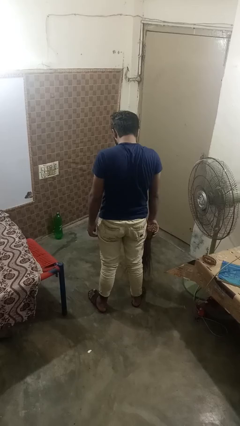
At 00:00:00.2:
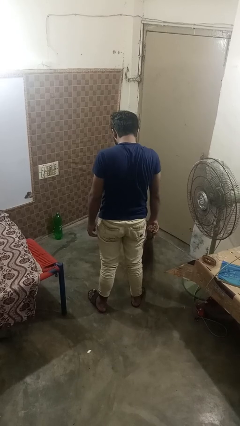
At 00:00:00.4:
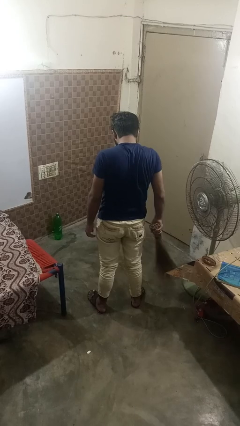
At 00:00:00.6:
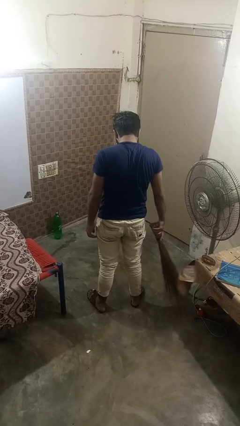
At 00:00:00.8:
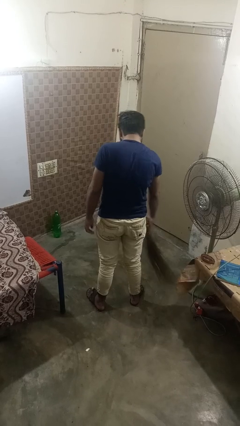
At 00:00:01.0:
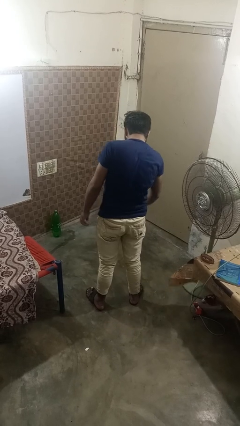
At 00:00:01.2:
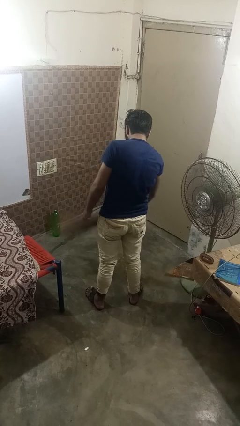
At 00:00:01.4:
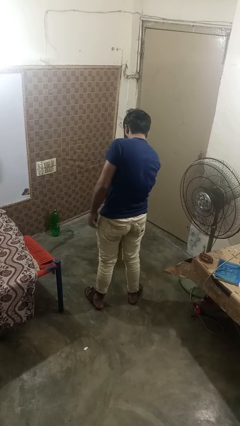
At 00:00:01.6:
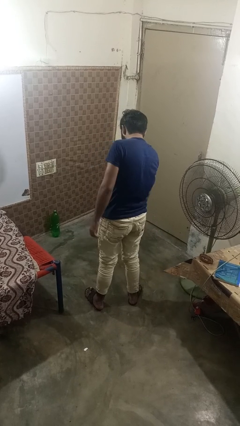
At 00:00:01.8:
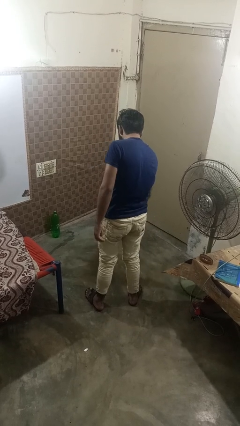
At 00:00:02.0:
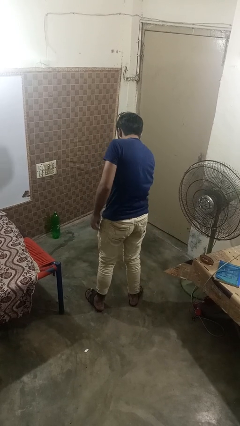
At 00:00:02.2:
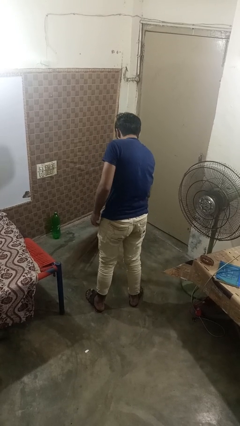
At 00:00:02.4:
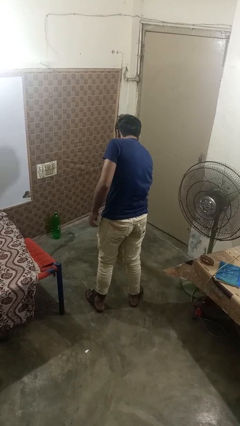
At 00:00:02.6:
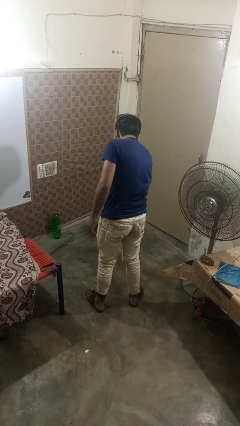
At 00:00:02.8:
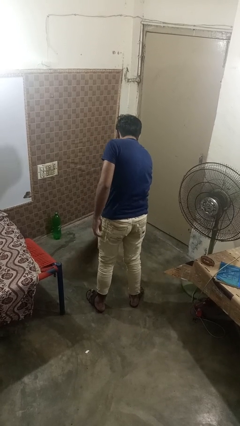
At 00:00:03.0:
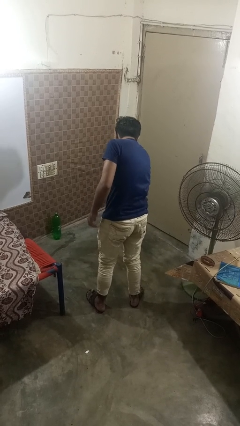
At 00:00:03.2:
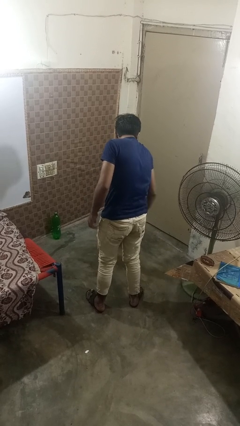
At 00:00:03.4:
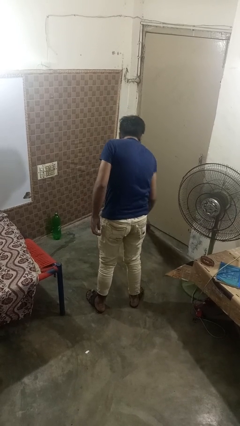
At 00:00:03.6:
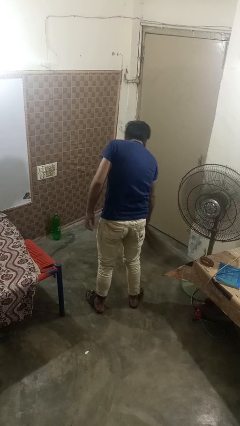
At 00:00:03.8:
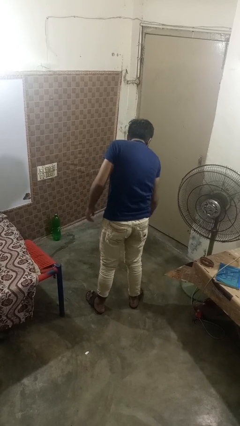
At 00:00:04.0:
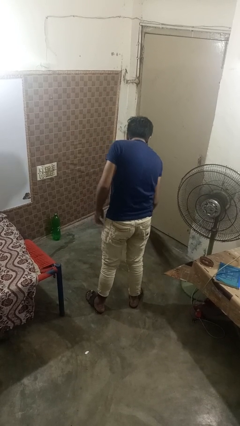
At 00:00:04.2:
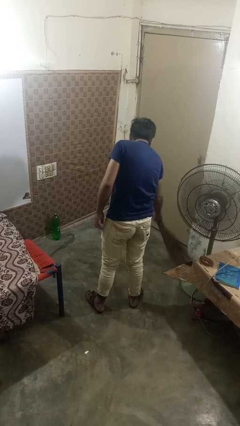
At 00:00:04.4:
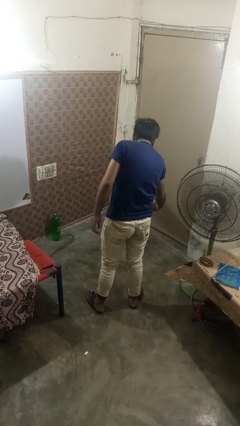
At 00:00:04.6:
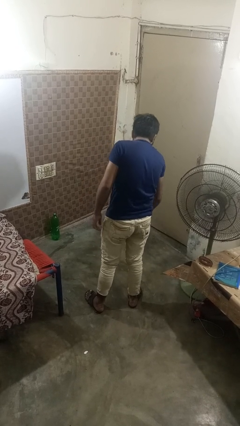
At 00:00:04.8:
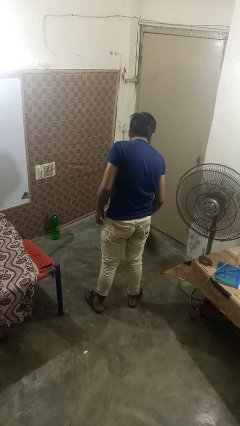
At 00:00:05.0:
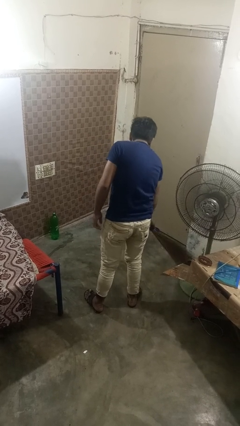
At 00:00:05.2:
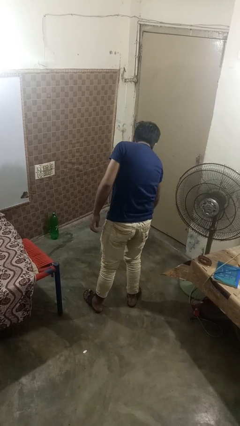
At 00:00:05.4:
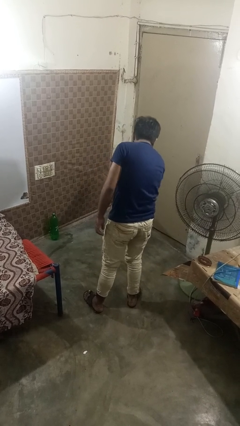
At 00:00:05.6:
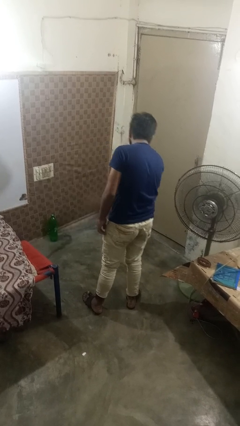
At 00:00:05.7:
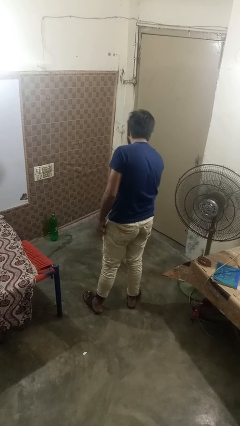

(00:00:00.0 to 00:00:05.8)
person sweeps floor

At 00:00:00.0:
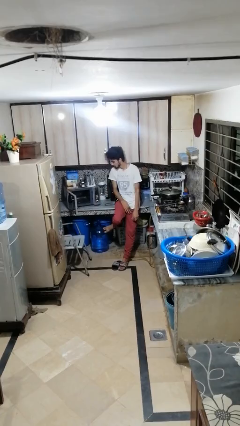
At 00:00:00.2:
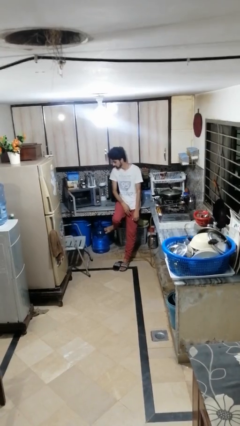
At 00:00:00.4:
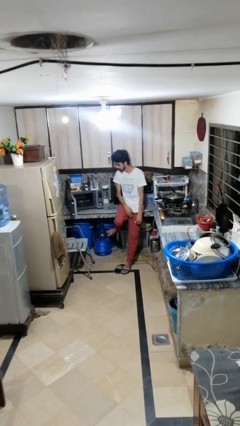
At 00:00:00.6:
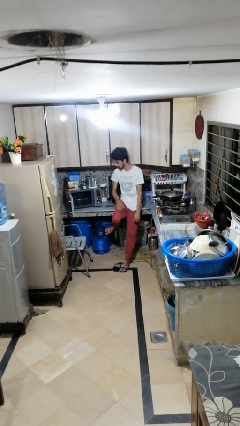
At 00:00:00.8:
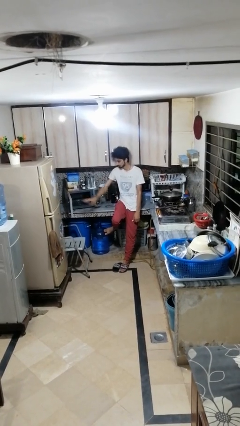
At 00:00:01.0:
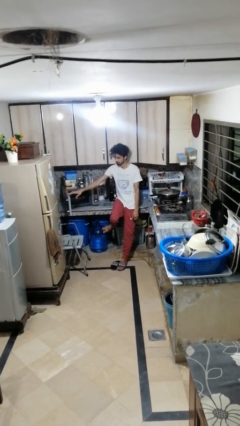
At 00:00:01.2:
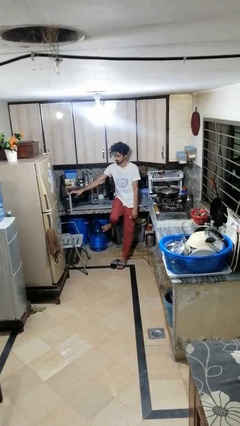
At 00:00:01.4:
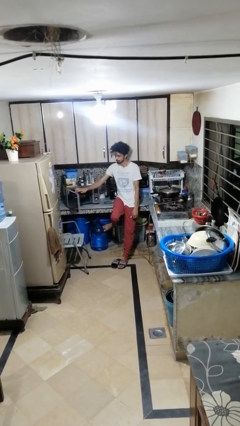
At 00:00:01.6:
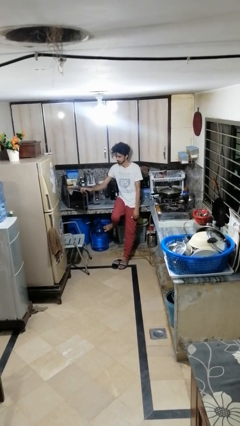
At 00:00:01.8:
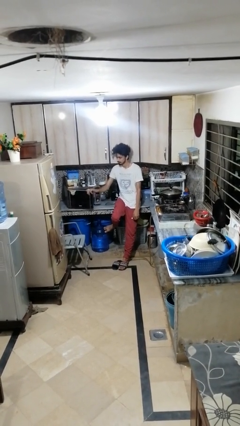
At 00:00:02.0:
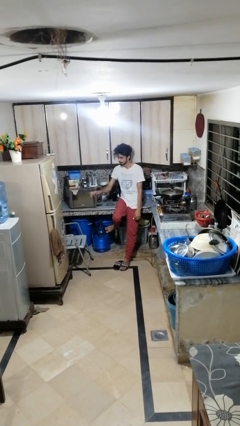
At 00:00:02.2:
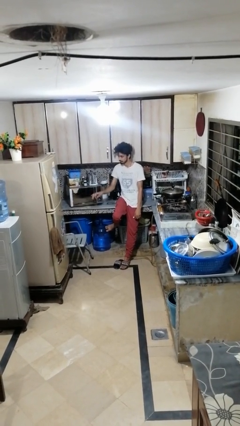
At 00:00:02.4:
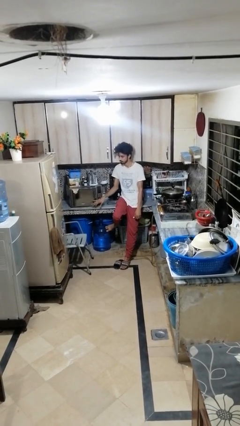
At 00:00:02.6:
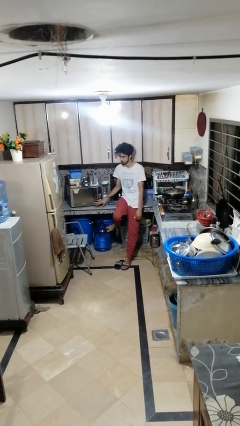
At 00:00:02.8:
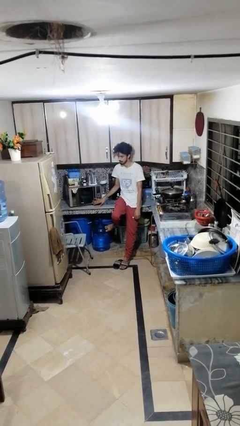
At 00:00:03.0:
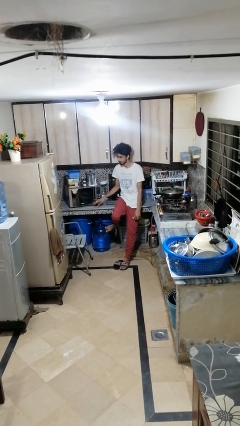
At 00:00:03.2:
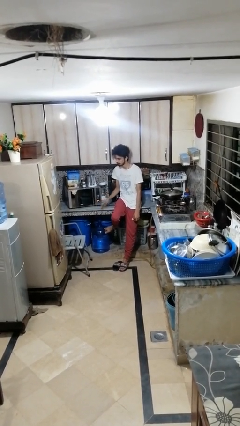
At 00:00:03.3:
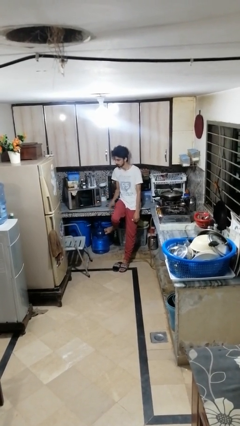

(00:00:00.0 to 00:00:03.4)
person closes oven door

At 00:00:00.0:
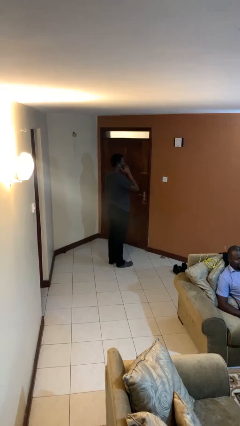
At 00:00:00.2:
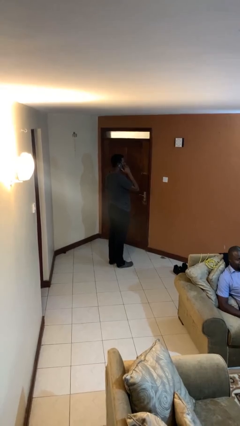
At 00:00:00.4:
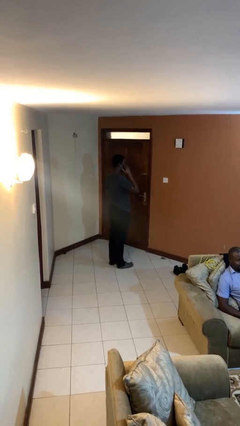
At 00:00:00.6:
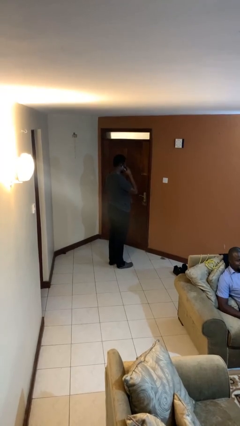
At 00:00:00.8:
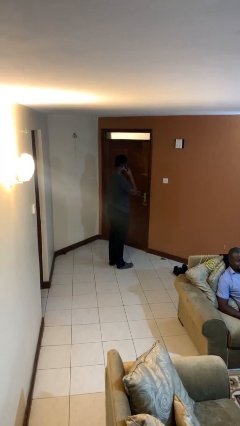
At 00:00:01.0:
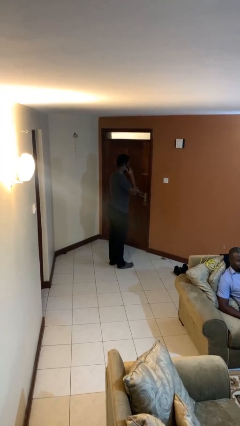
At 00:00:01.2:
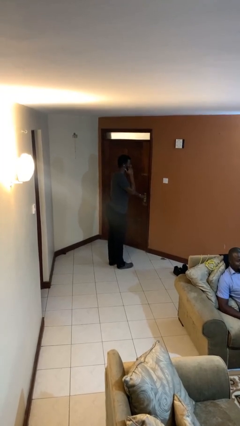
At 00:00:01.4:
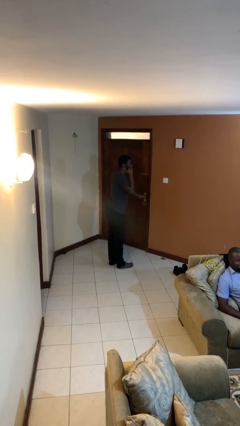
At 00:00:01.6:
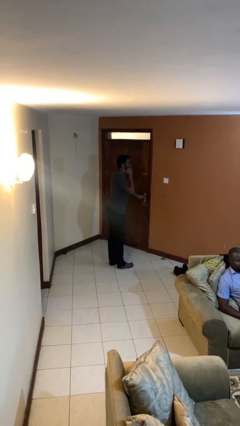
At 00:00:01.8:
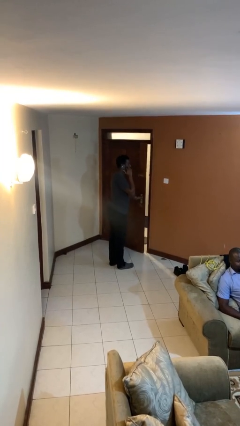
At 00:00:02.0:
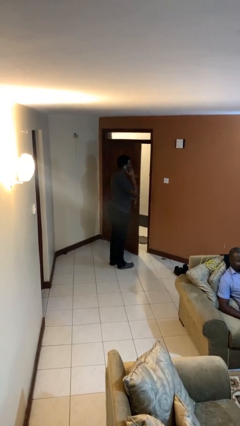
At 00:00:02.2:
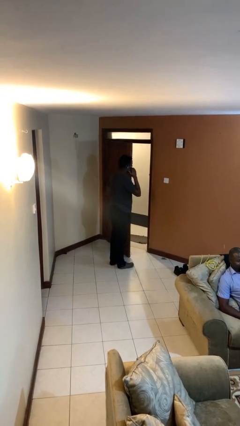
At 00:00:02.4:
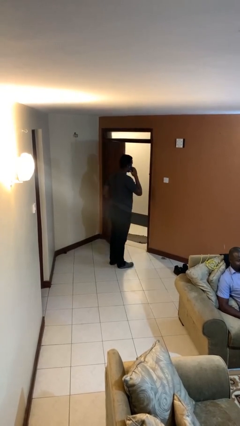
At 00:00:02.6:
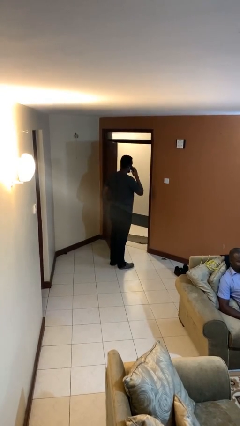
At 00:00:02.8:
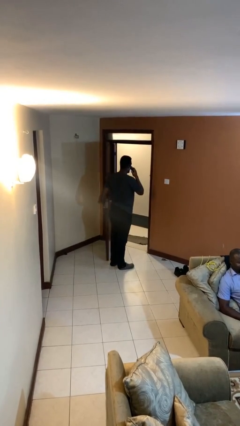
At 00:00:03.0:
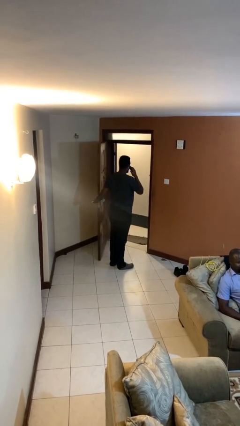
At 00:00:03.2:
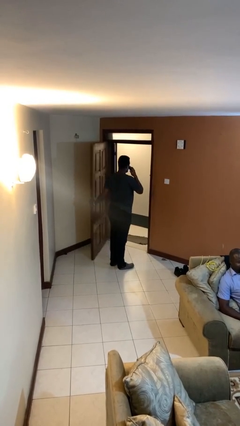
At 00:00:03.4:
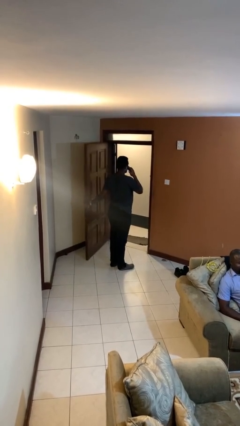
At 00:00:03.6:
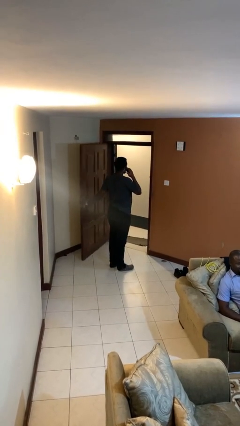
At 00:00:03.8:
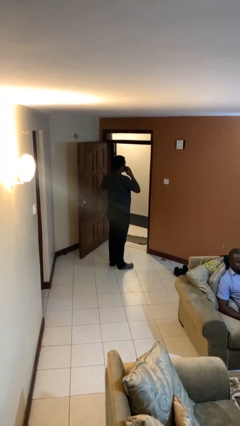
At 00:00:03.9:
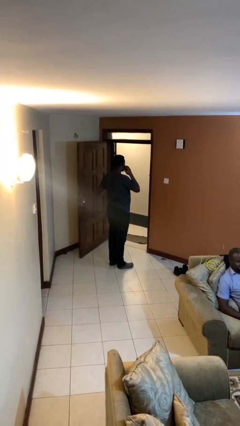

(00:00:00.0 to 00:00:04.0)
person opens facility door

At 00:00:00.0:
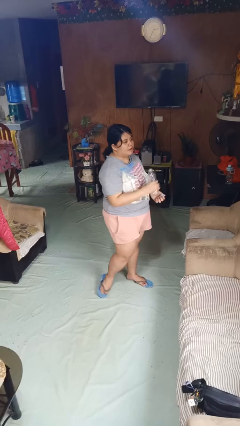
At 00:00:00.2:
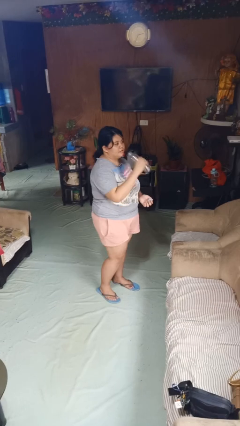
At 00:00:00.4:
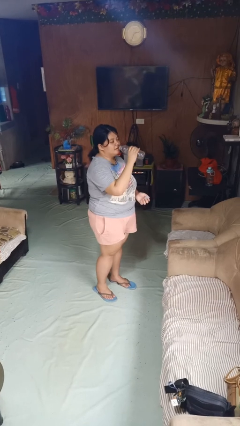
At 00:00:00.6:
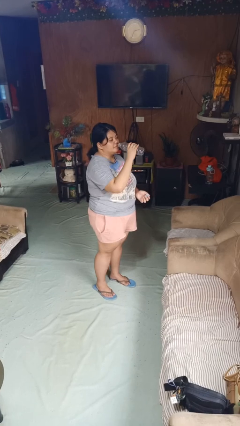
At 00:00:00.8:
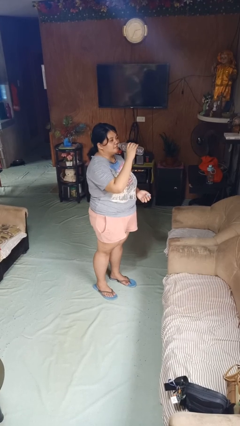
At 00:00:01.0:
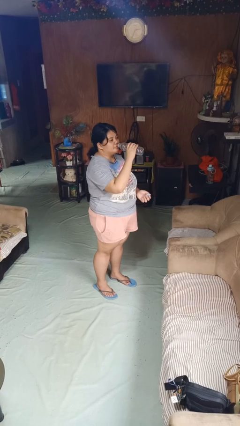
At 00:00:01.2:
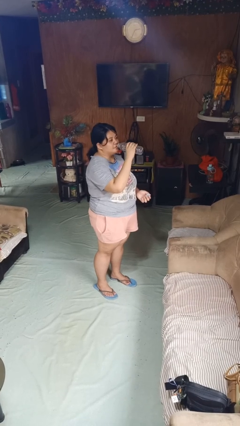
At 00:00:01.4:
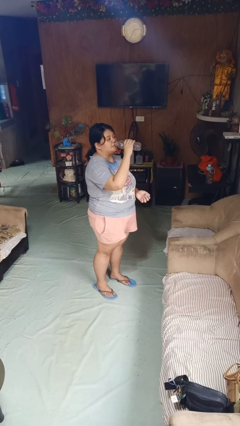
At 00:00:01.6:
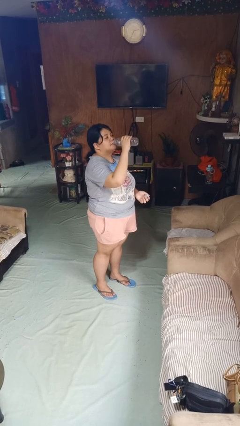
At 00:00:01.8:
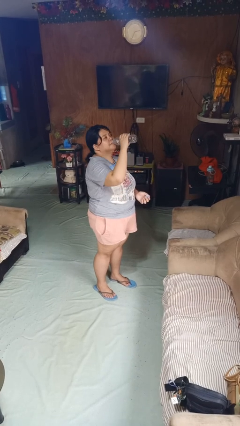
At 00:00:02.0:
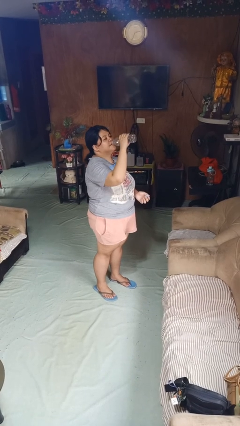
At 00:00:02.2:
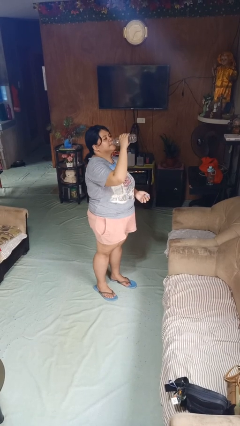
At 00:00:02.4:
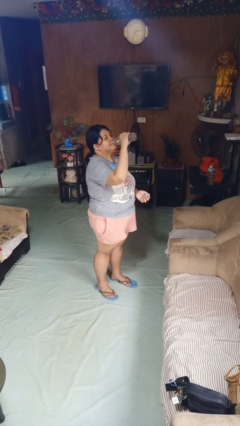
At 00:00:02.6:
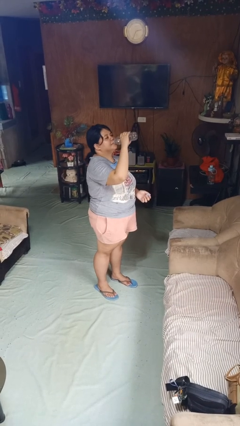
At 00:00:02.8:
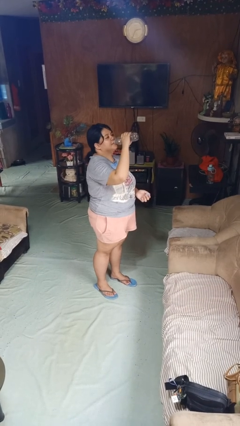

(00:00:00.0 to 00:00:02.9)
person drinks from bottle

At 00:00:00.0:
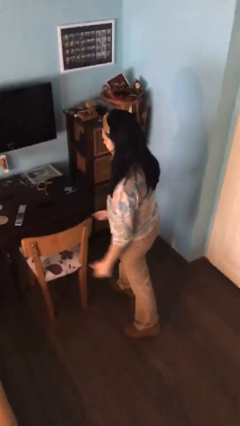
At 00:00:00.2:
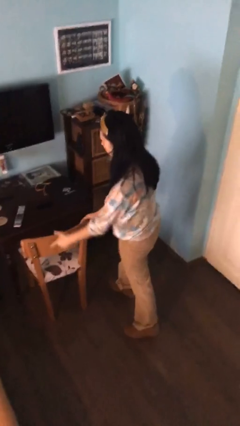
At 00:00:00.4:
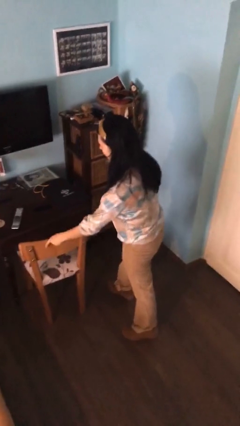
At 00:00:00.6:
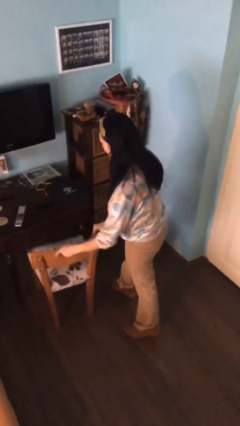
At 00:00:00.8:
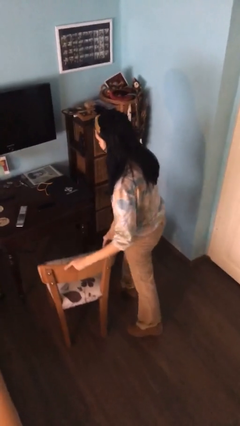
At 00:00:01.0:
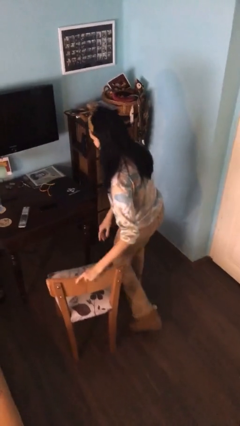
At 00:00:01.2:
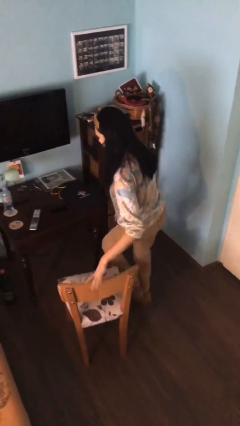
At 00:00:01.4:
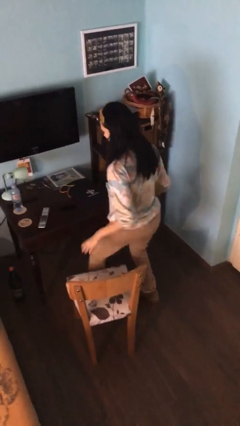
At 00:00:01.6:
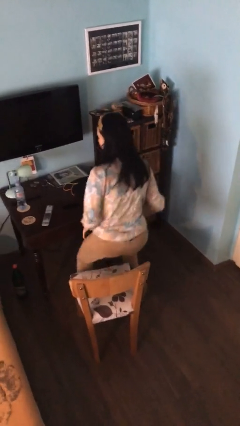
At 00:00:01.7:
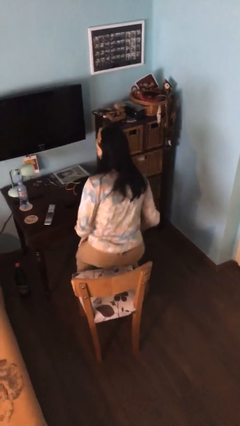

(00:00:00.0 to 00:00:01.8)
person sits down
